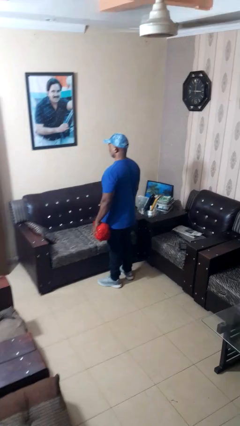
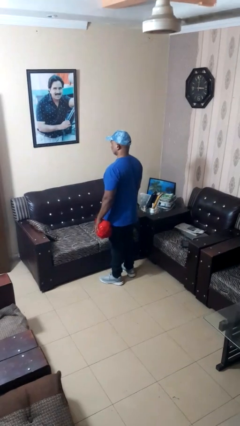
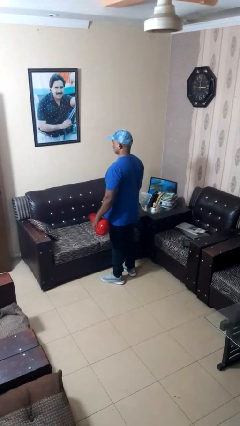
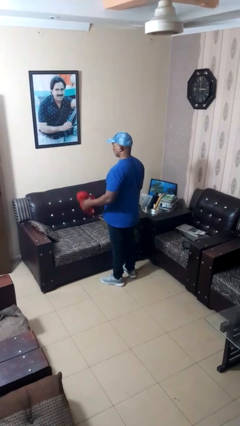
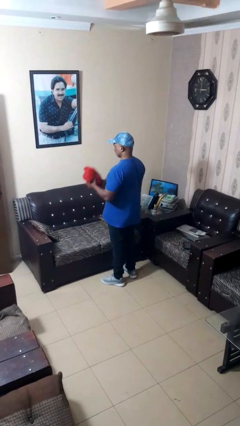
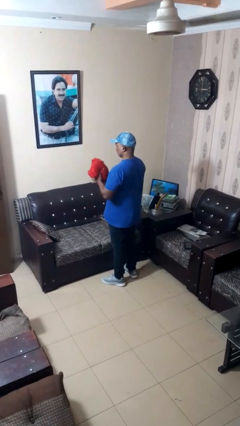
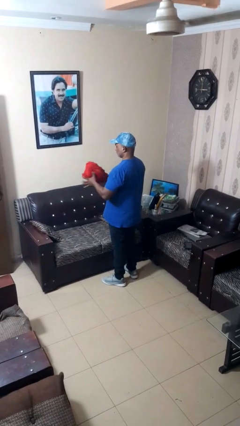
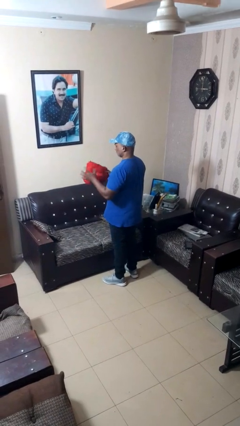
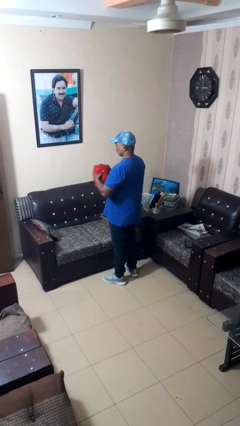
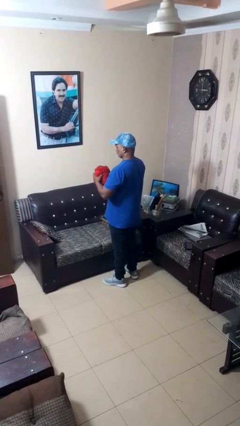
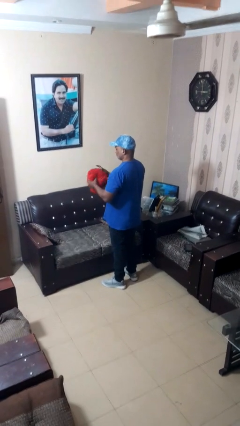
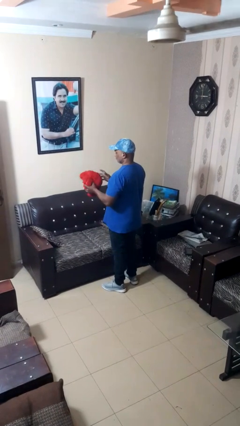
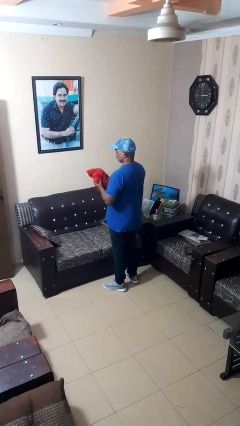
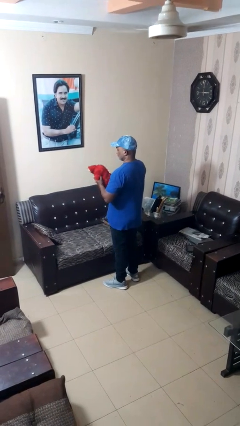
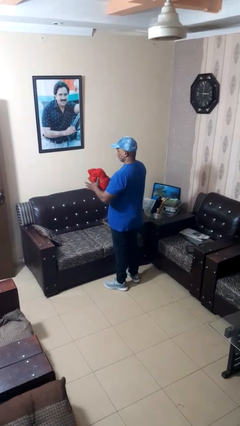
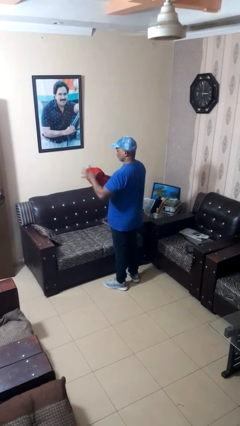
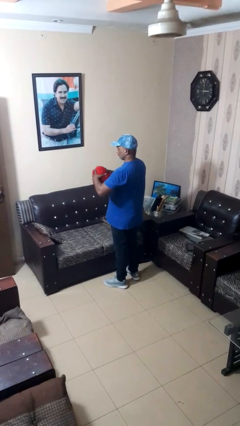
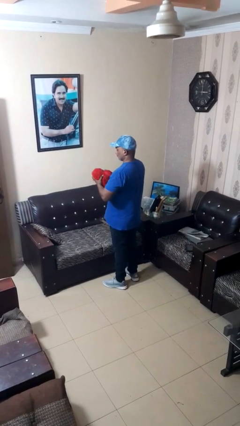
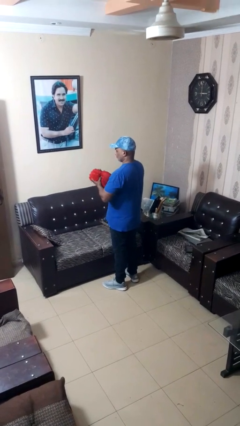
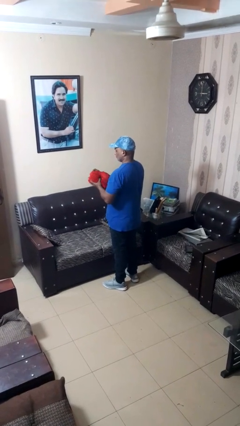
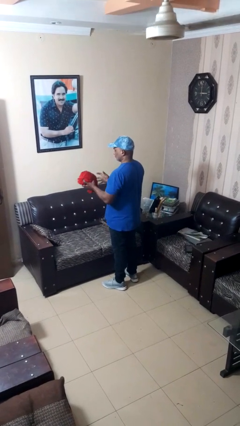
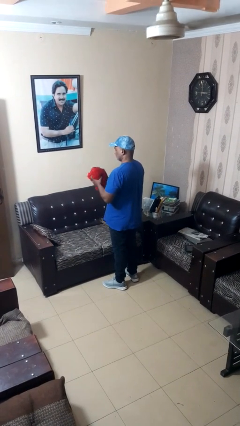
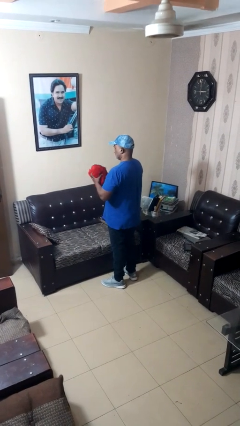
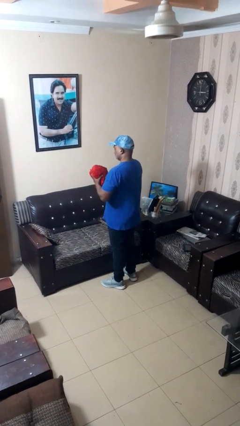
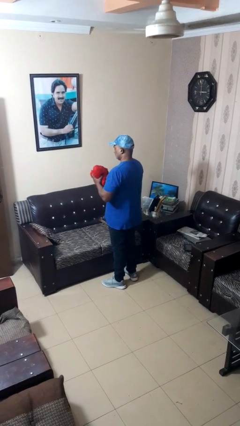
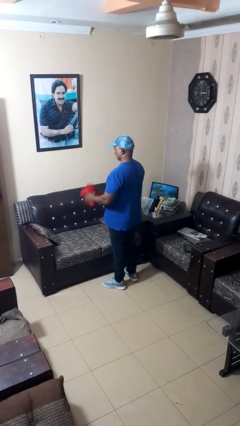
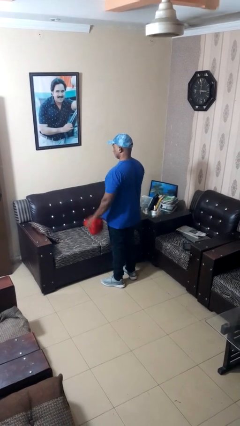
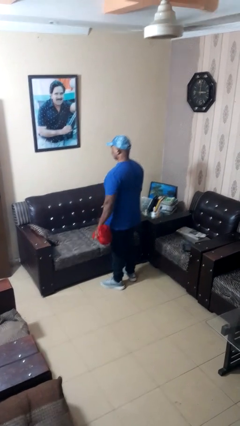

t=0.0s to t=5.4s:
person squeezes object

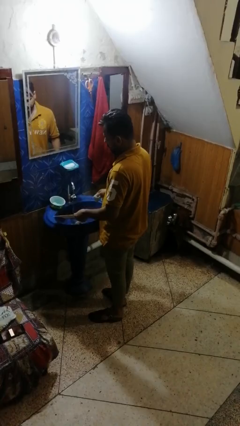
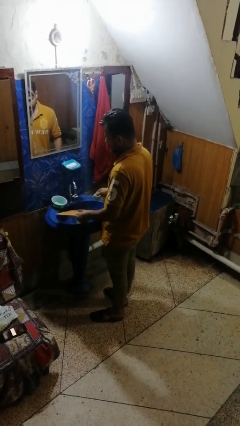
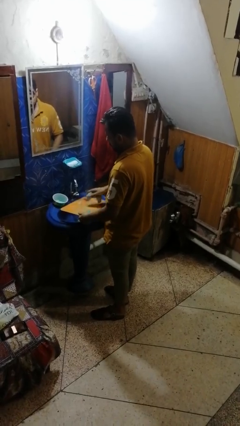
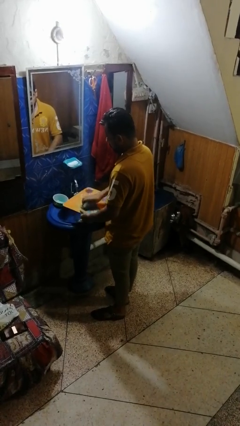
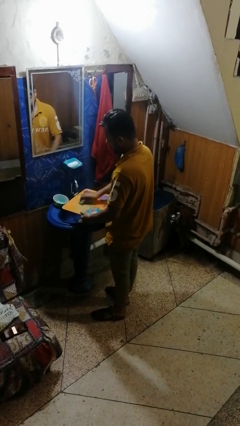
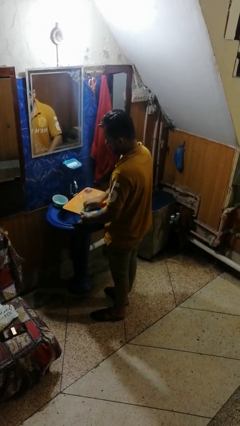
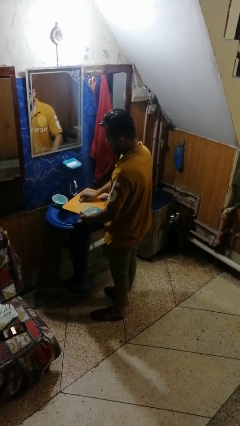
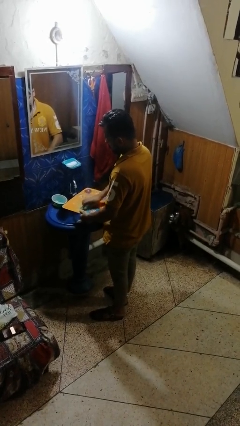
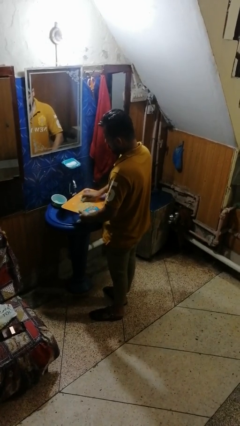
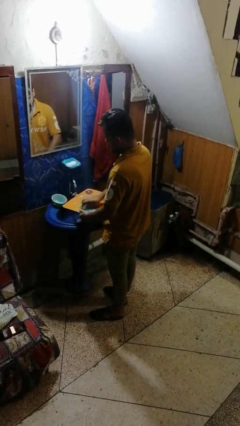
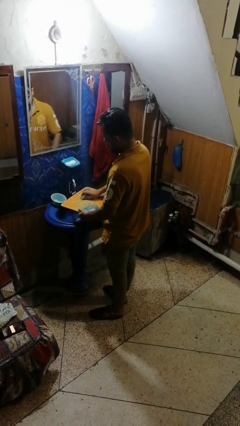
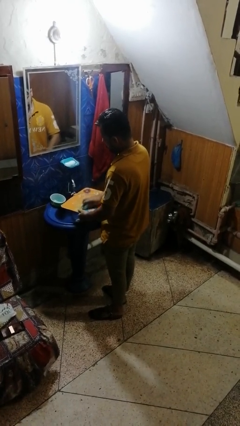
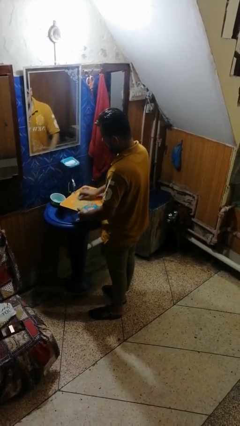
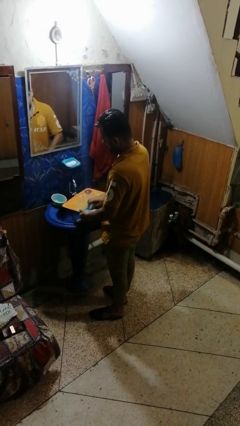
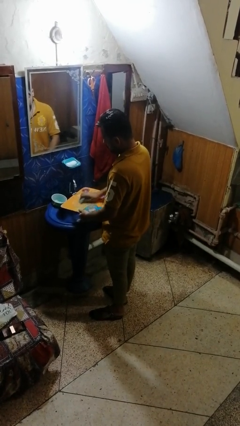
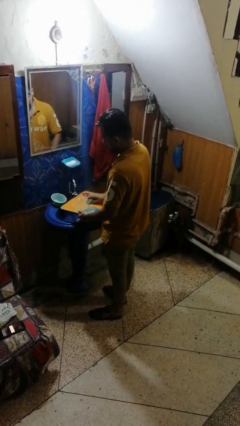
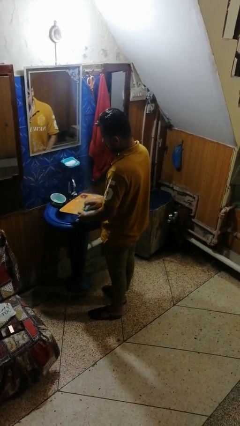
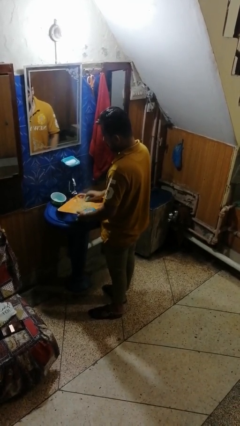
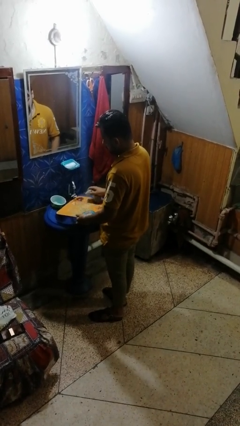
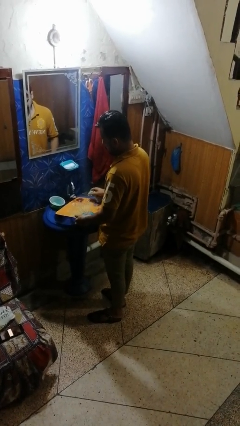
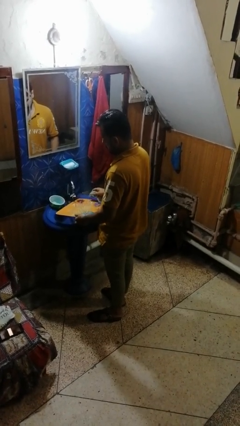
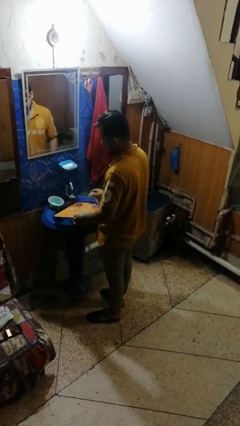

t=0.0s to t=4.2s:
person washes dish

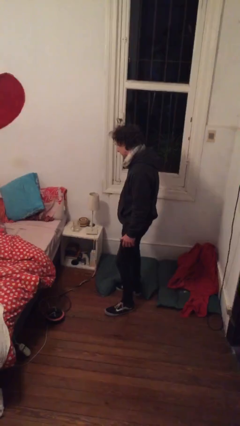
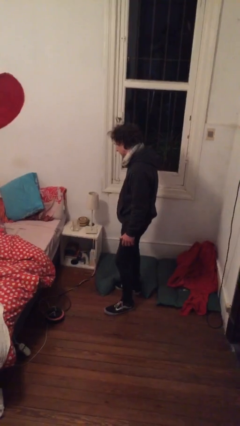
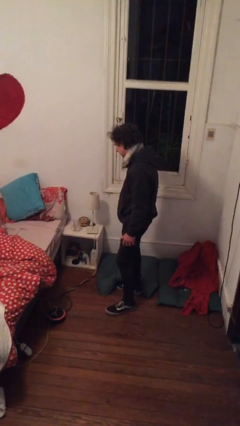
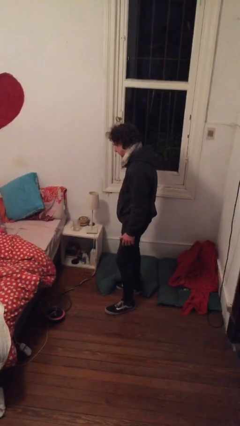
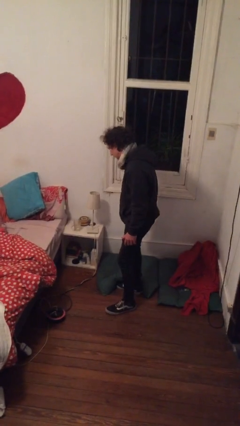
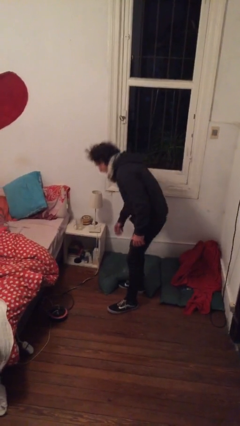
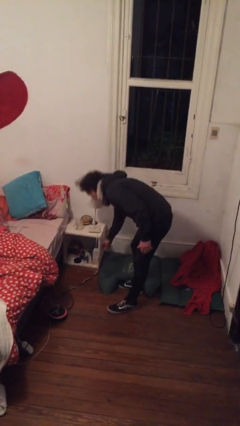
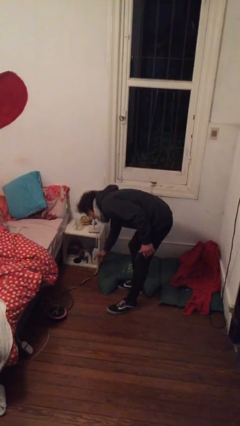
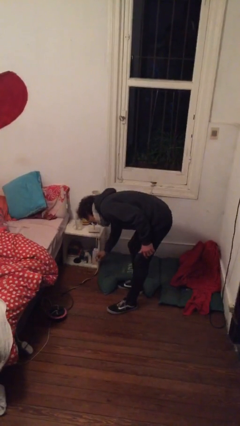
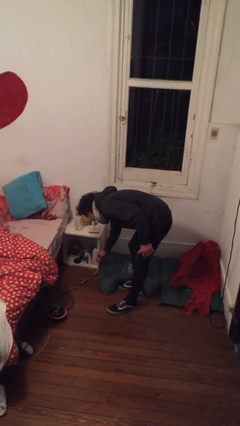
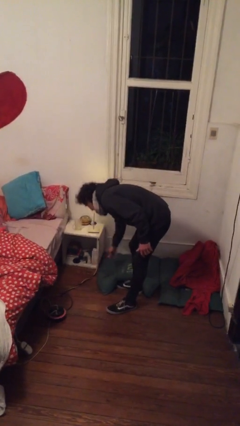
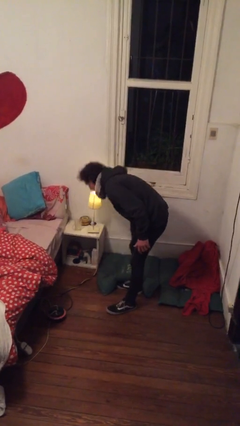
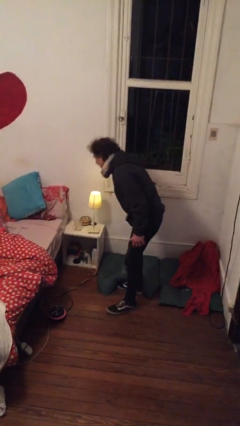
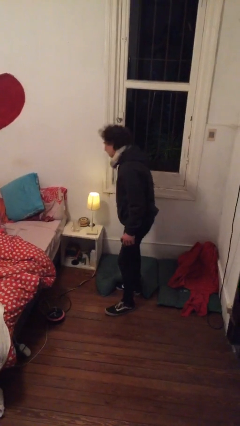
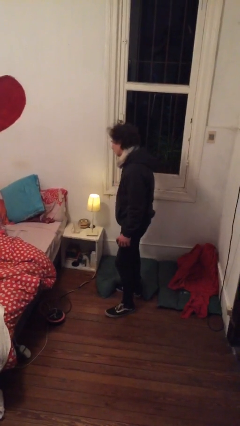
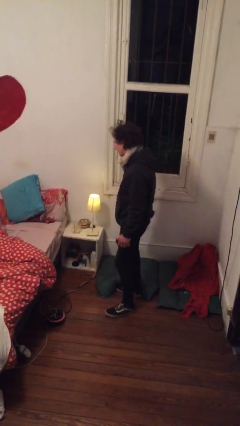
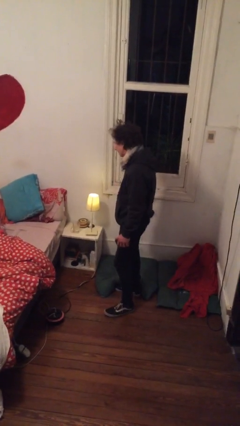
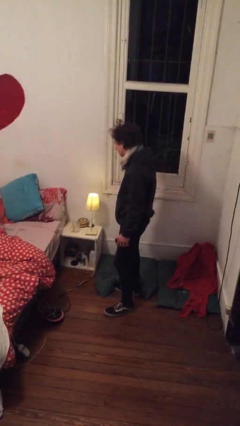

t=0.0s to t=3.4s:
person turns on lamp

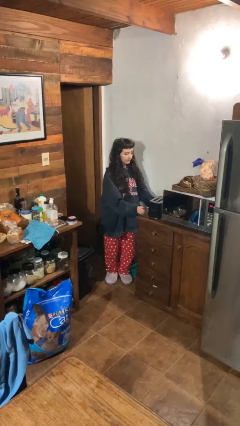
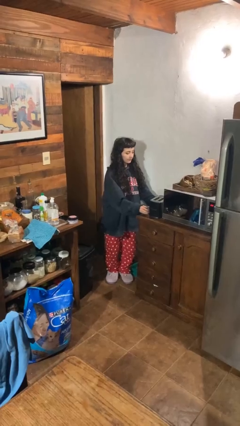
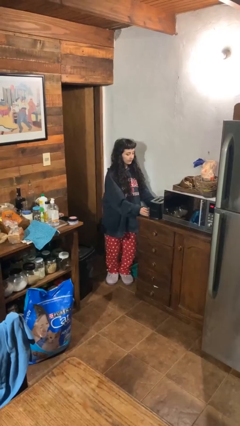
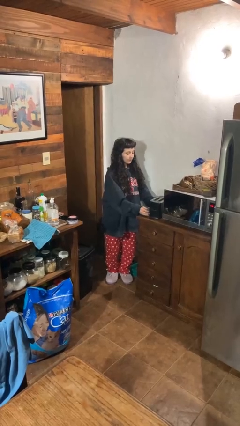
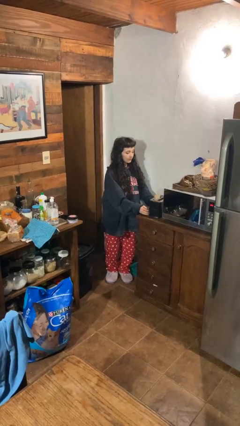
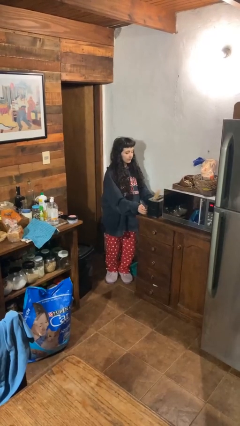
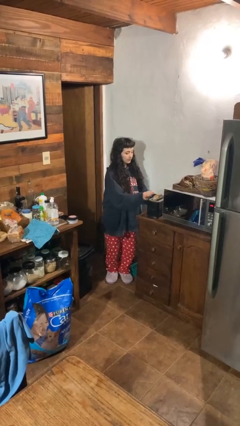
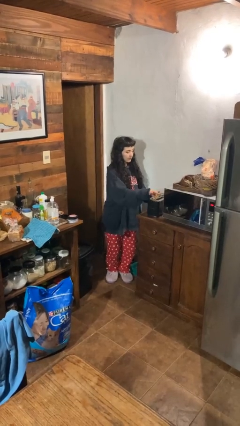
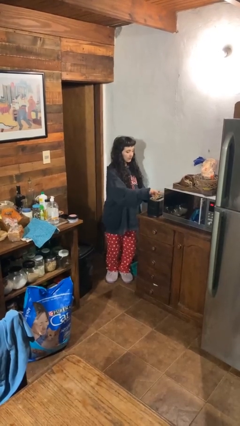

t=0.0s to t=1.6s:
person takes object from toaster

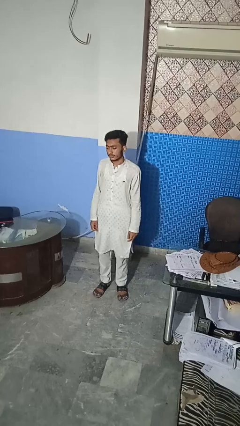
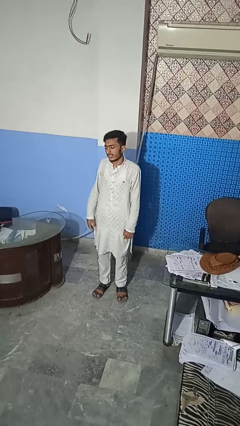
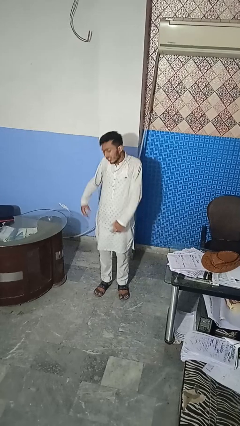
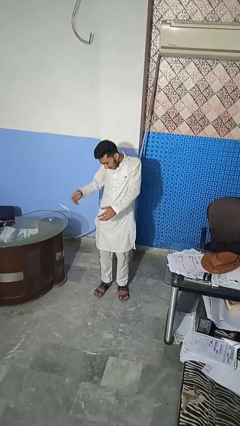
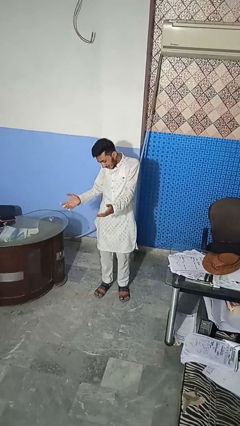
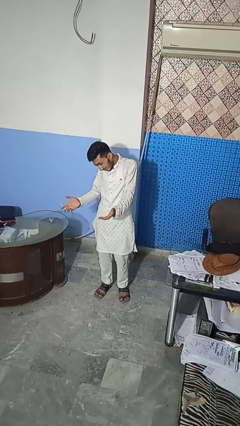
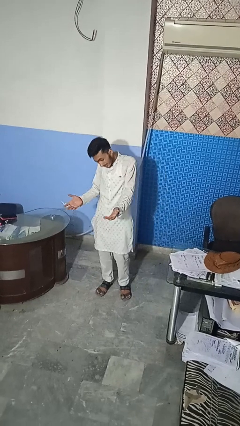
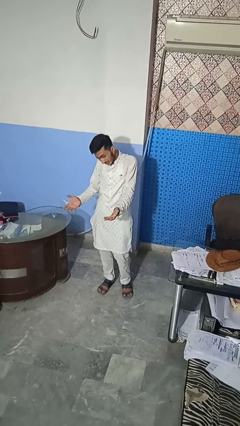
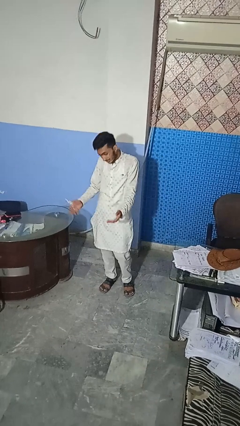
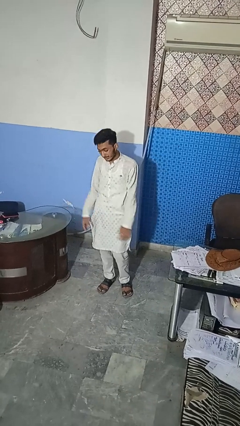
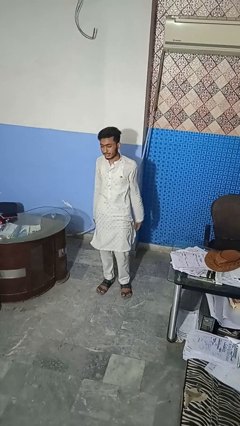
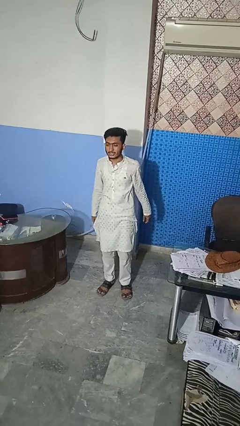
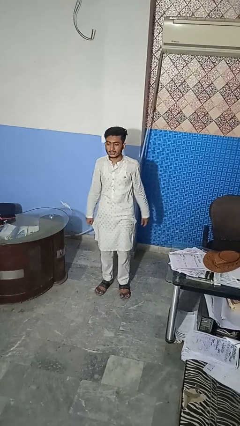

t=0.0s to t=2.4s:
person shrugs

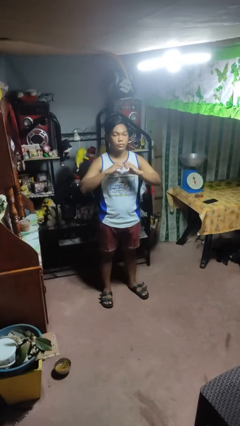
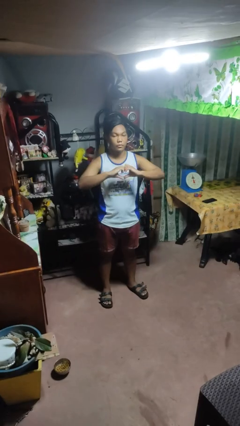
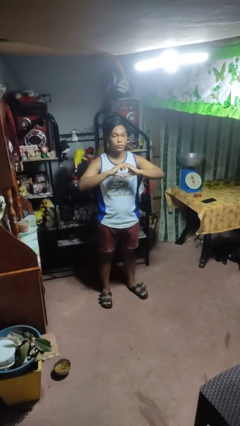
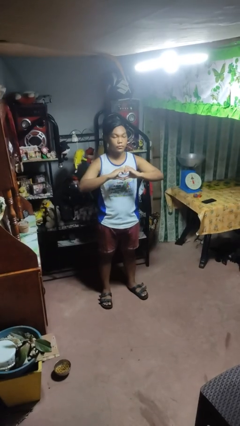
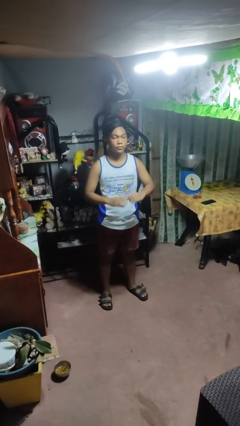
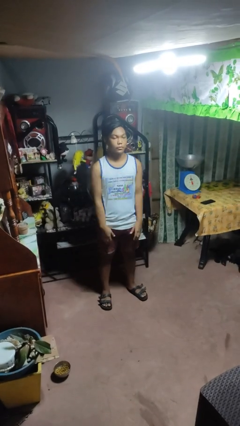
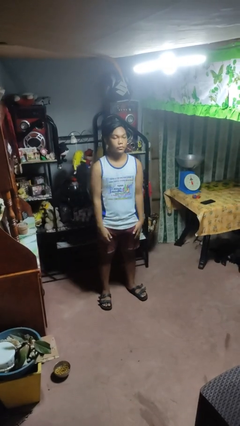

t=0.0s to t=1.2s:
person gestures heart
